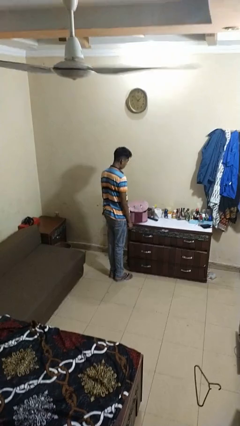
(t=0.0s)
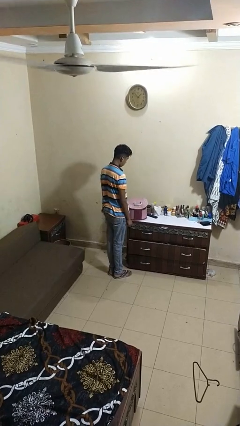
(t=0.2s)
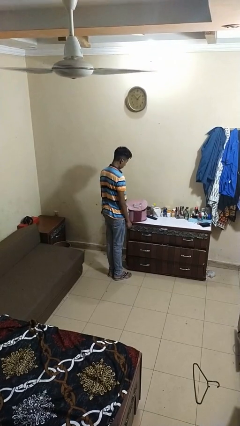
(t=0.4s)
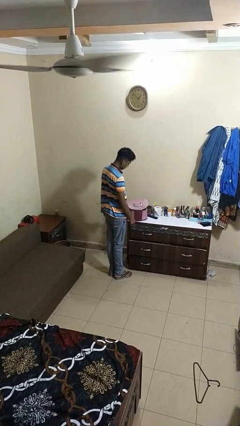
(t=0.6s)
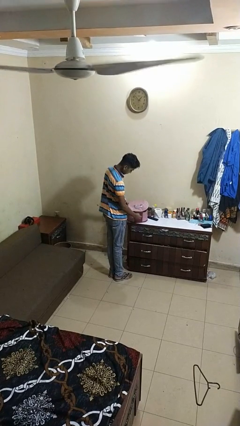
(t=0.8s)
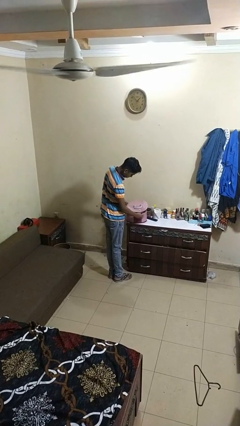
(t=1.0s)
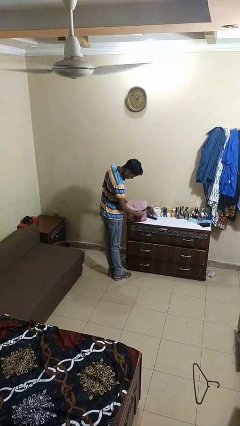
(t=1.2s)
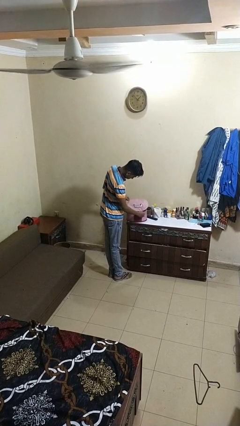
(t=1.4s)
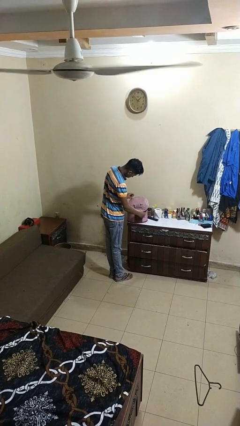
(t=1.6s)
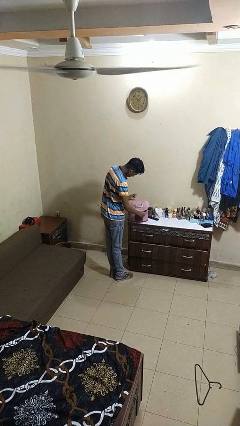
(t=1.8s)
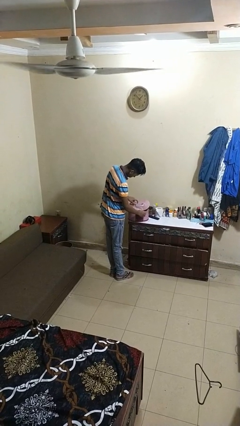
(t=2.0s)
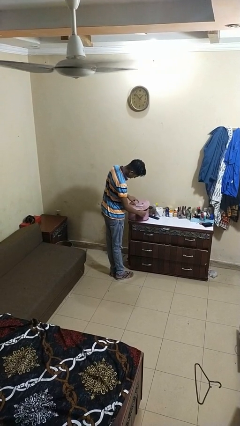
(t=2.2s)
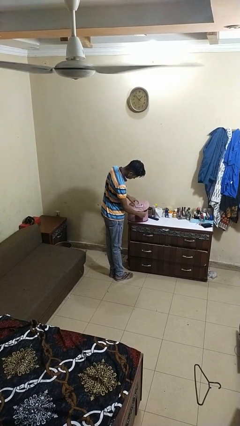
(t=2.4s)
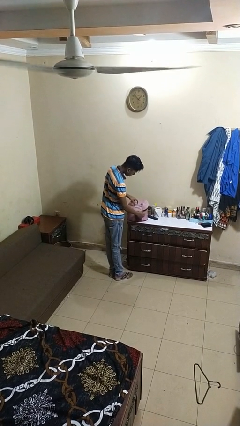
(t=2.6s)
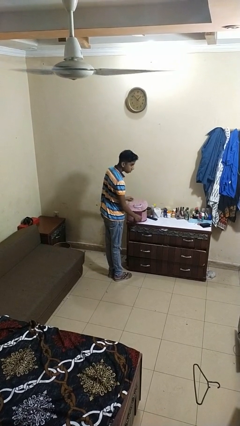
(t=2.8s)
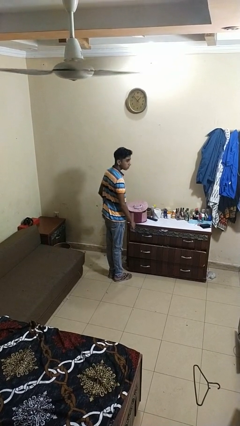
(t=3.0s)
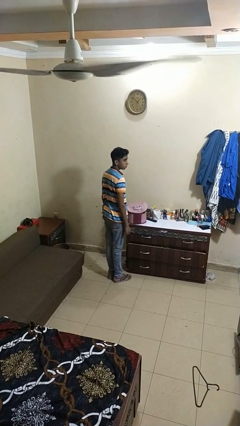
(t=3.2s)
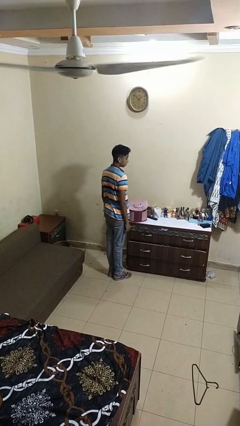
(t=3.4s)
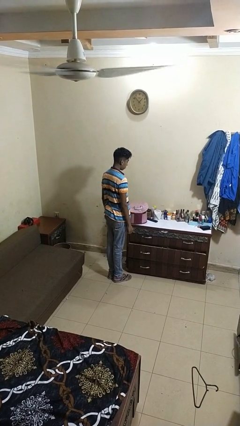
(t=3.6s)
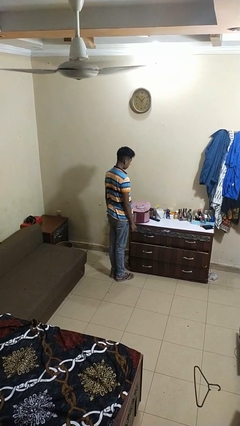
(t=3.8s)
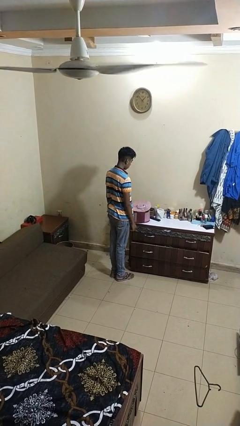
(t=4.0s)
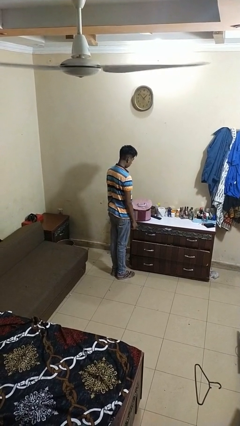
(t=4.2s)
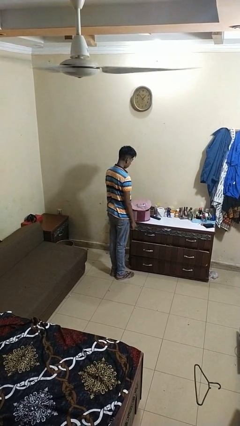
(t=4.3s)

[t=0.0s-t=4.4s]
person taps object with finger

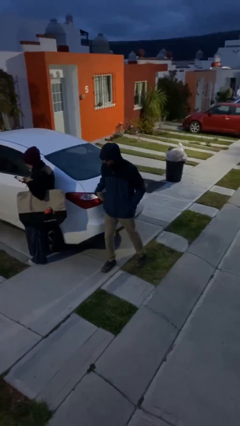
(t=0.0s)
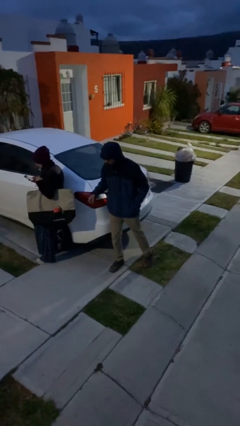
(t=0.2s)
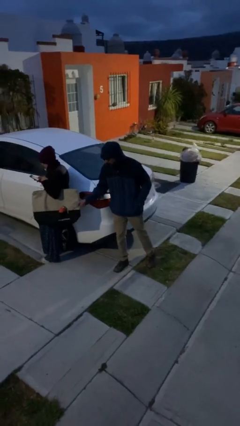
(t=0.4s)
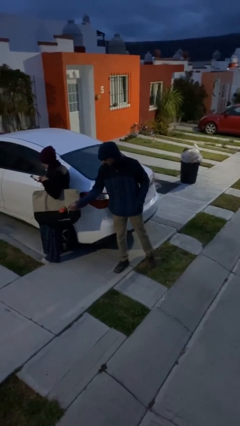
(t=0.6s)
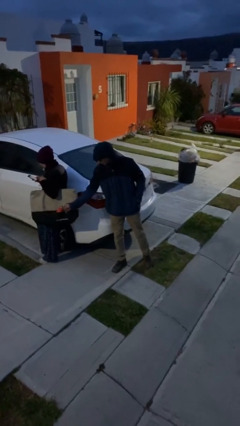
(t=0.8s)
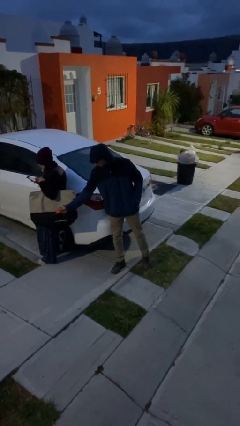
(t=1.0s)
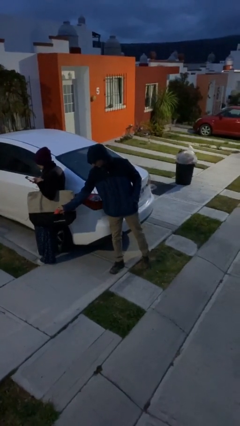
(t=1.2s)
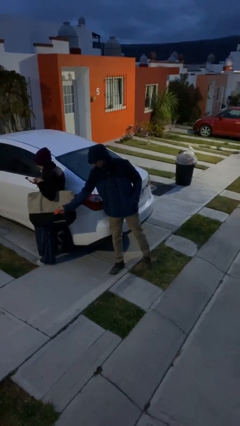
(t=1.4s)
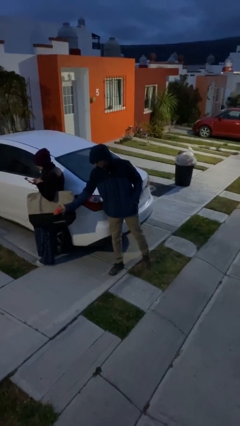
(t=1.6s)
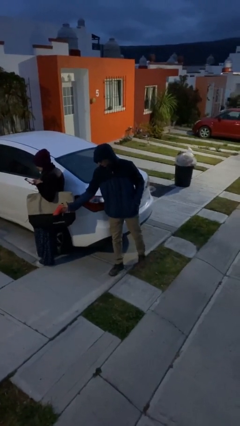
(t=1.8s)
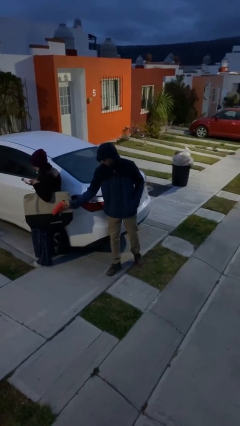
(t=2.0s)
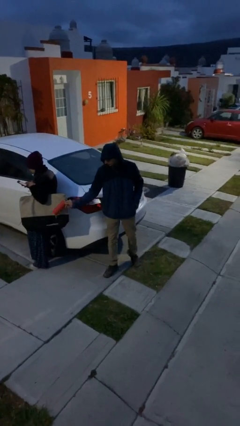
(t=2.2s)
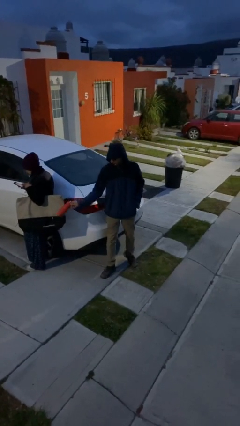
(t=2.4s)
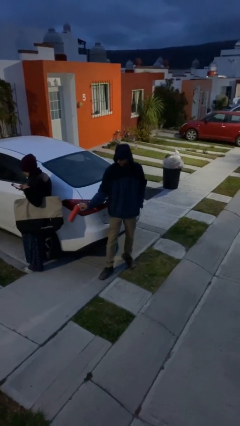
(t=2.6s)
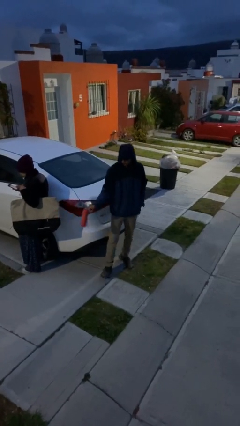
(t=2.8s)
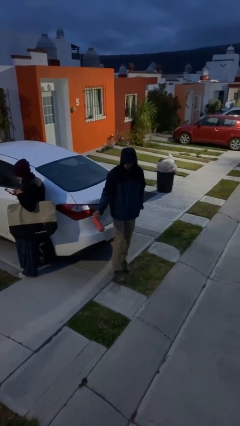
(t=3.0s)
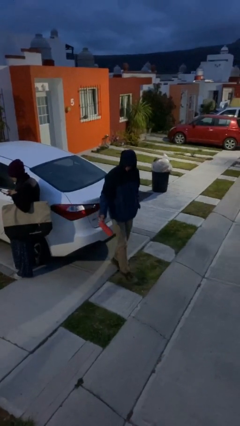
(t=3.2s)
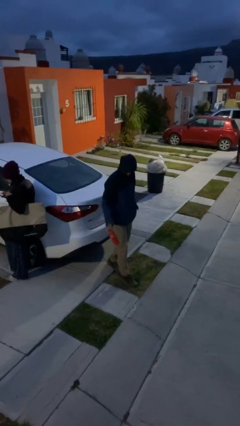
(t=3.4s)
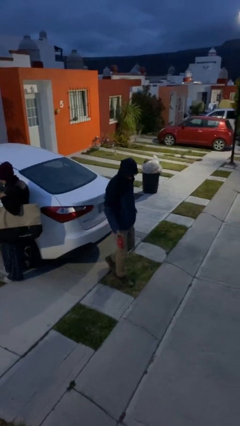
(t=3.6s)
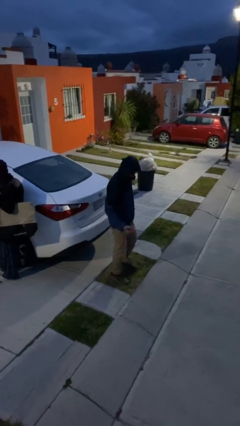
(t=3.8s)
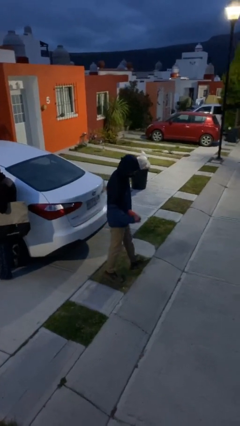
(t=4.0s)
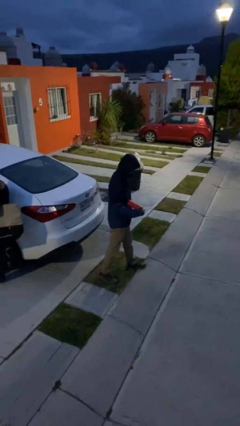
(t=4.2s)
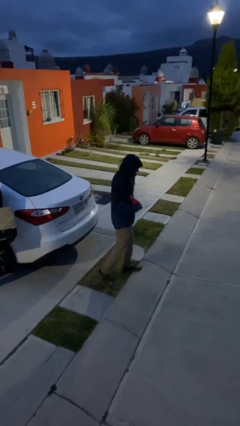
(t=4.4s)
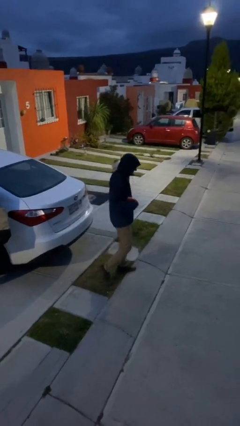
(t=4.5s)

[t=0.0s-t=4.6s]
person steals object from person

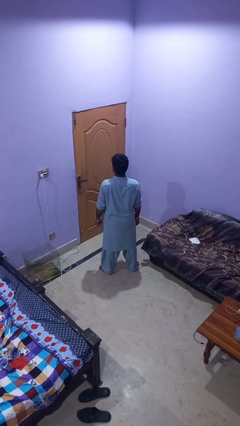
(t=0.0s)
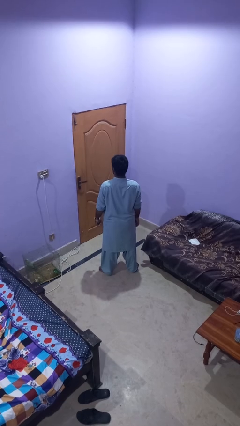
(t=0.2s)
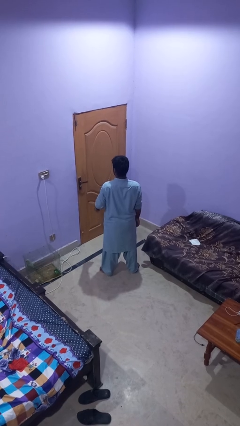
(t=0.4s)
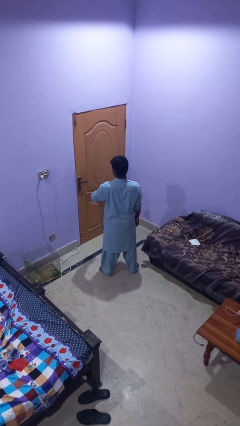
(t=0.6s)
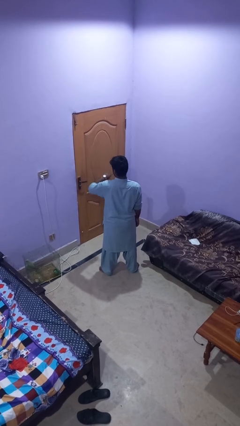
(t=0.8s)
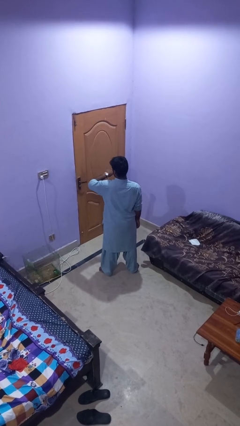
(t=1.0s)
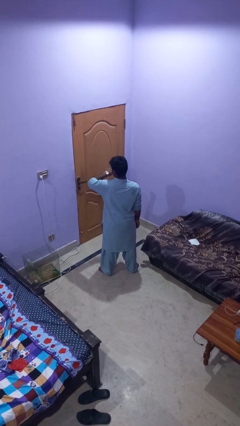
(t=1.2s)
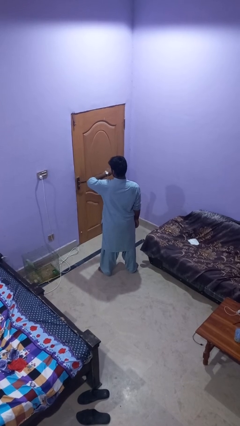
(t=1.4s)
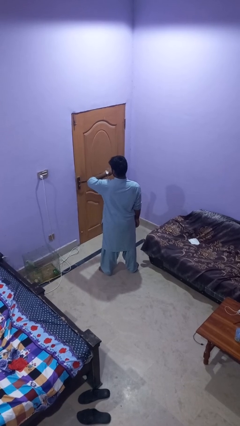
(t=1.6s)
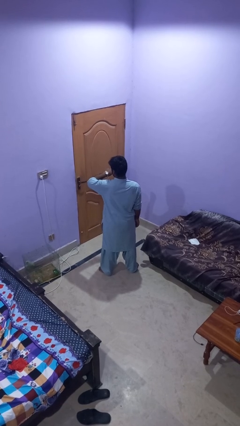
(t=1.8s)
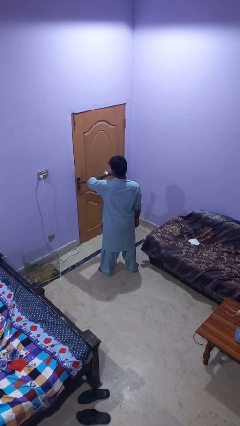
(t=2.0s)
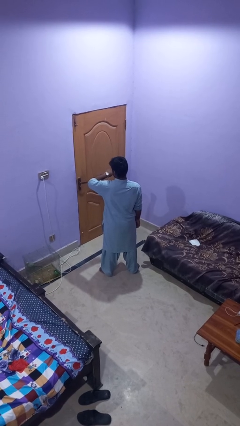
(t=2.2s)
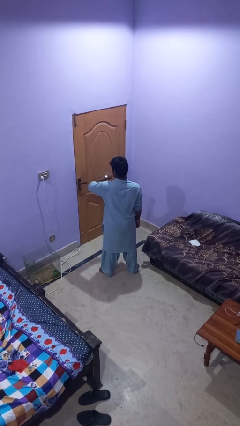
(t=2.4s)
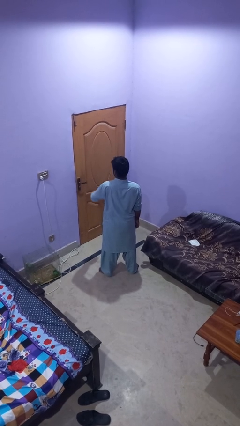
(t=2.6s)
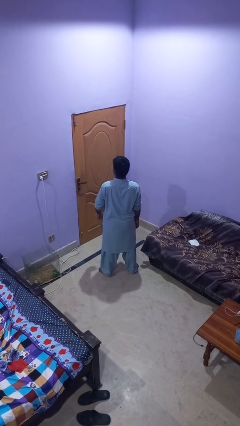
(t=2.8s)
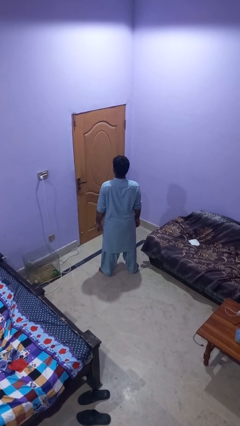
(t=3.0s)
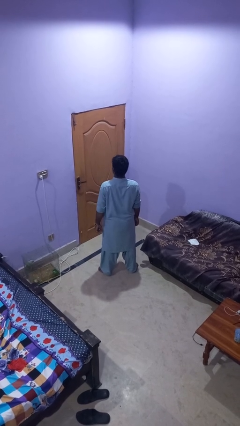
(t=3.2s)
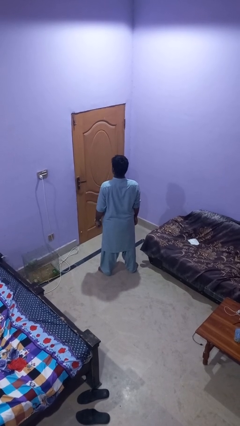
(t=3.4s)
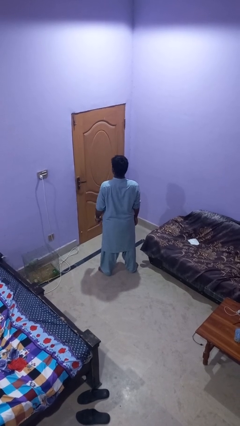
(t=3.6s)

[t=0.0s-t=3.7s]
person looks at wristwatch

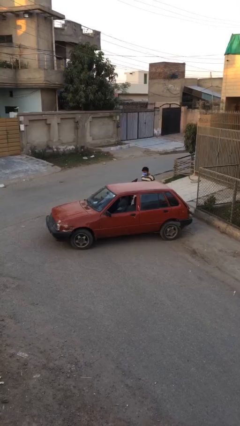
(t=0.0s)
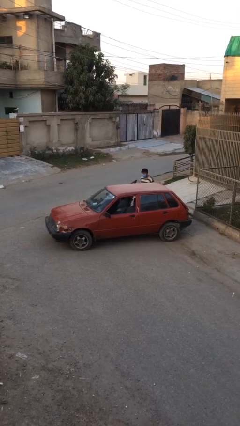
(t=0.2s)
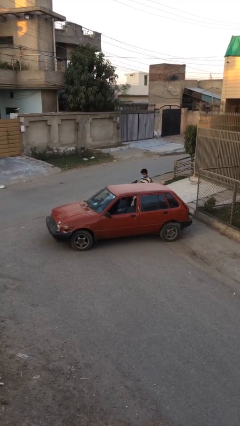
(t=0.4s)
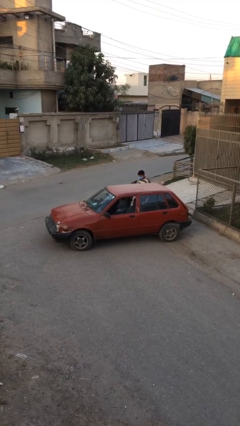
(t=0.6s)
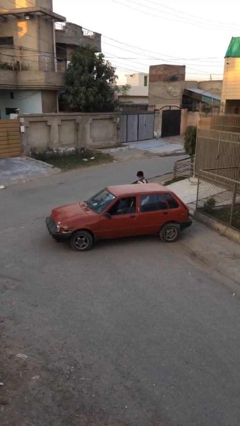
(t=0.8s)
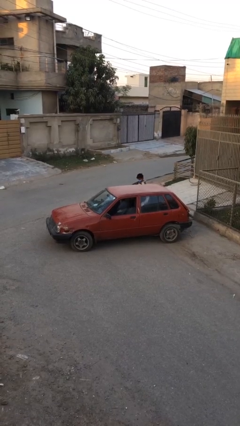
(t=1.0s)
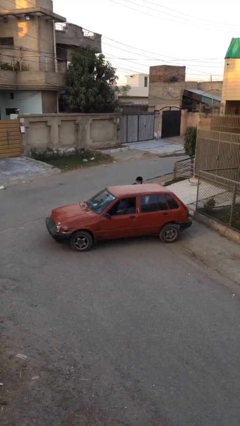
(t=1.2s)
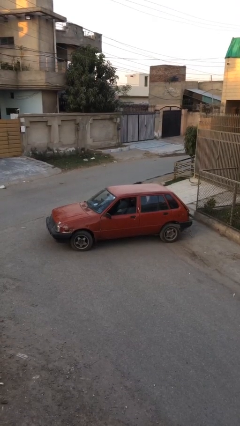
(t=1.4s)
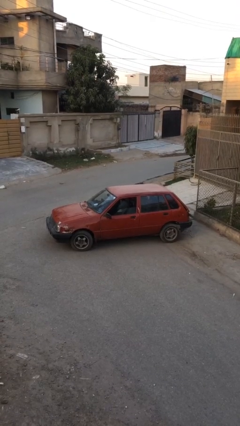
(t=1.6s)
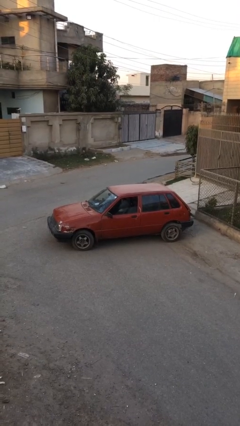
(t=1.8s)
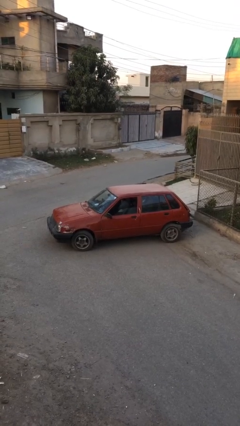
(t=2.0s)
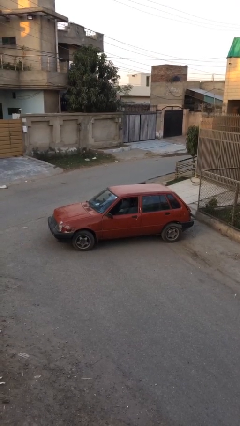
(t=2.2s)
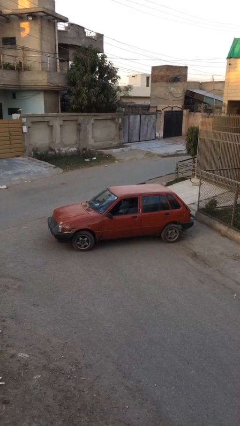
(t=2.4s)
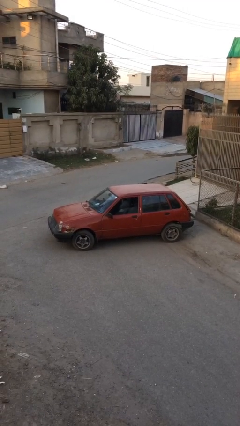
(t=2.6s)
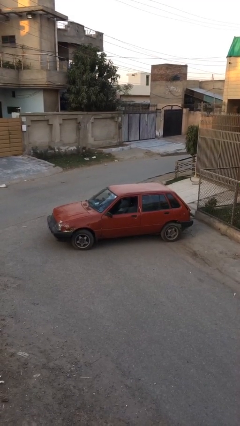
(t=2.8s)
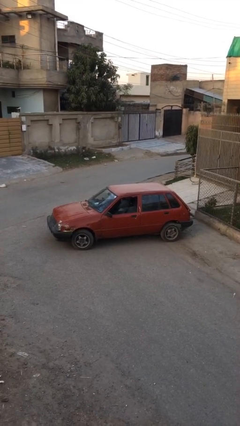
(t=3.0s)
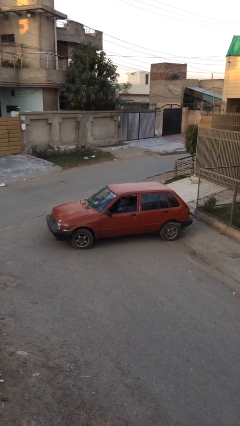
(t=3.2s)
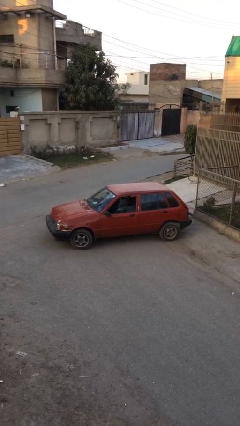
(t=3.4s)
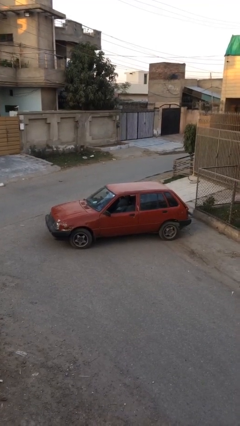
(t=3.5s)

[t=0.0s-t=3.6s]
car picks up person

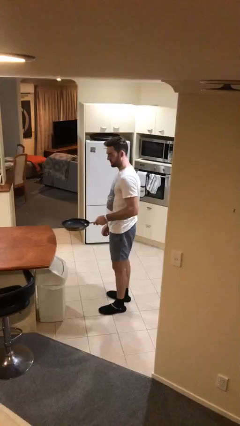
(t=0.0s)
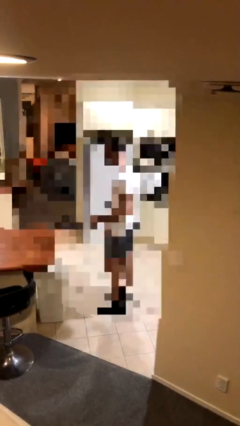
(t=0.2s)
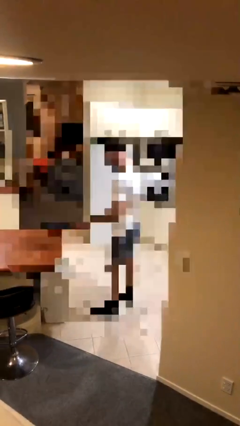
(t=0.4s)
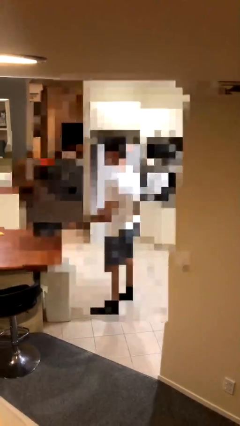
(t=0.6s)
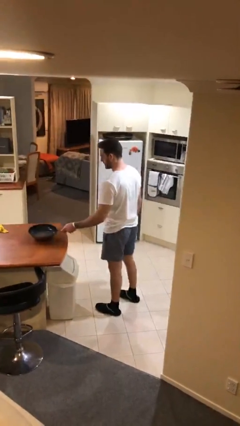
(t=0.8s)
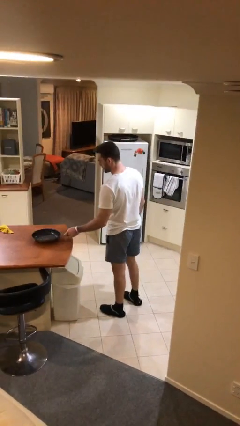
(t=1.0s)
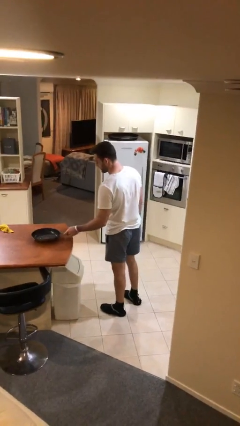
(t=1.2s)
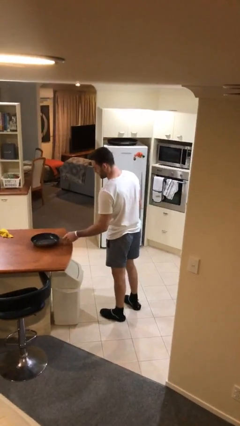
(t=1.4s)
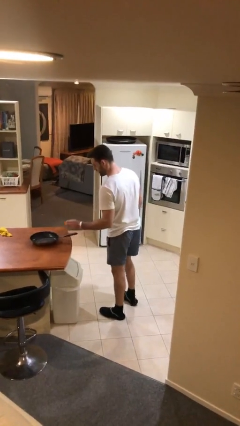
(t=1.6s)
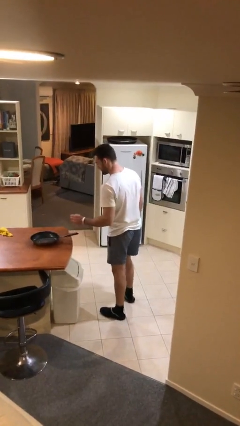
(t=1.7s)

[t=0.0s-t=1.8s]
person puts down object on table
